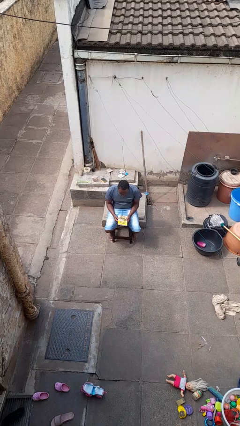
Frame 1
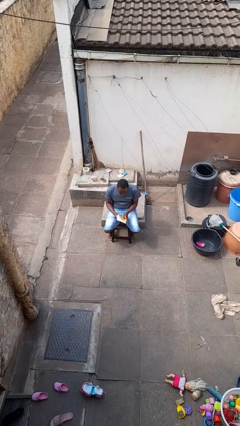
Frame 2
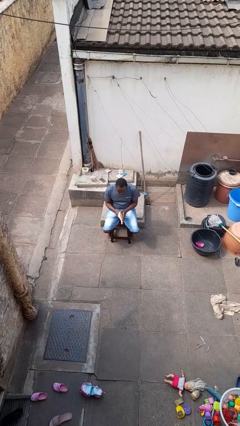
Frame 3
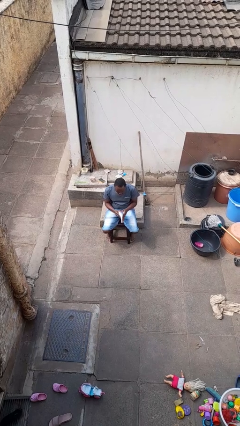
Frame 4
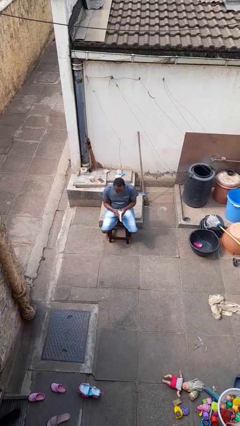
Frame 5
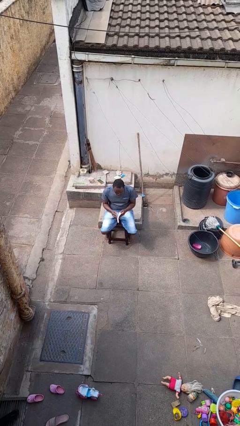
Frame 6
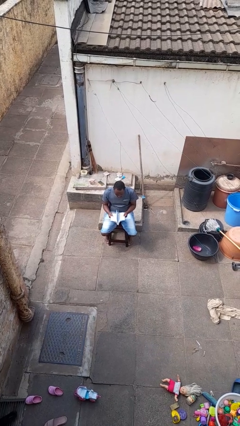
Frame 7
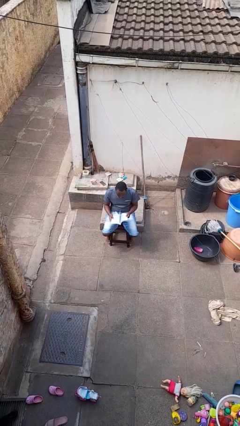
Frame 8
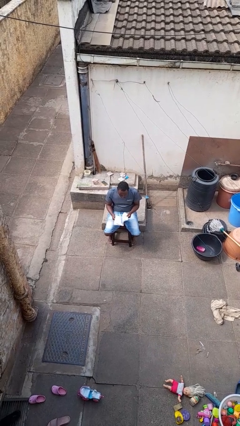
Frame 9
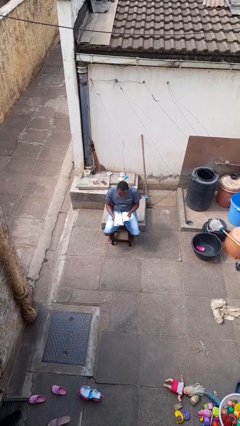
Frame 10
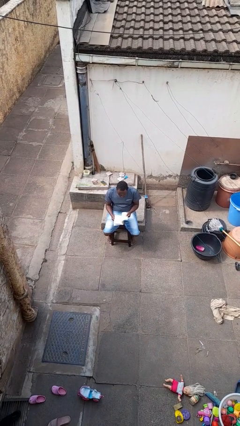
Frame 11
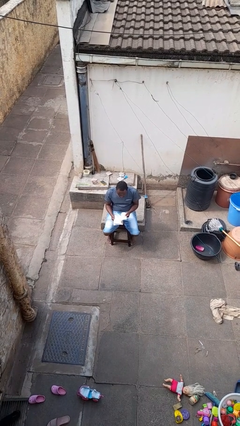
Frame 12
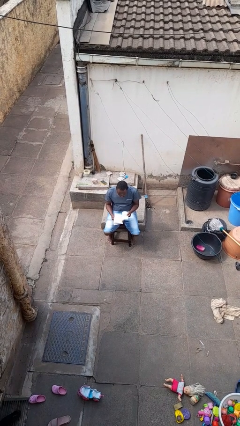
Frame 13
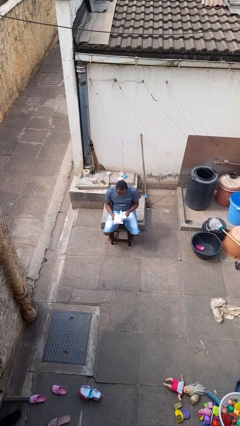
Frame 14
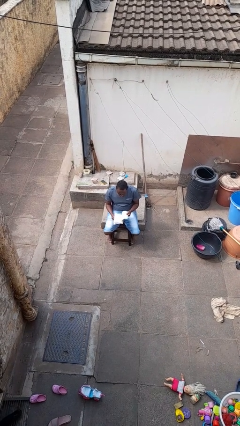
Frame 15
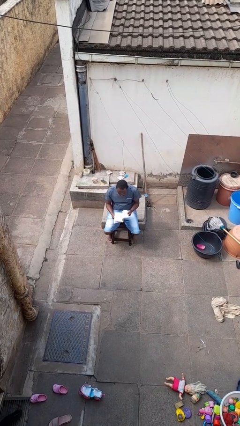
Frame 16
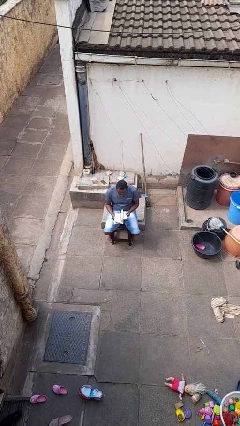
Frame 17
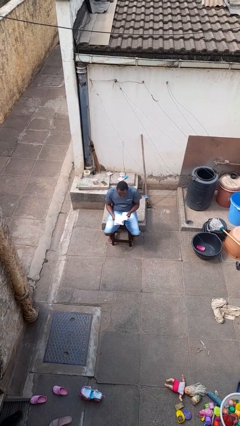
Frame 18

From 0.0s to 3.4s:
person reads book

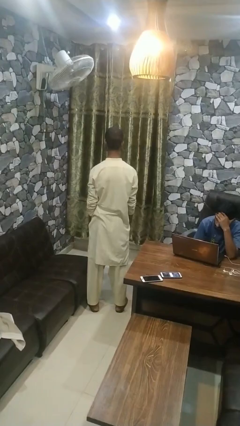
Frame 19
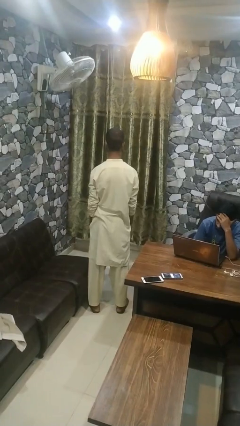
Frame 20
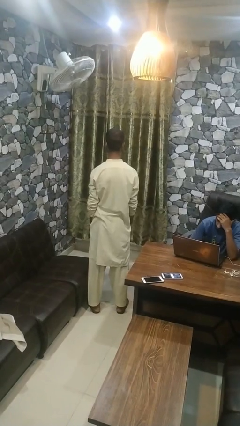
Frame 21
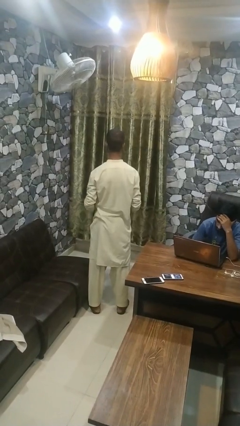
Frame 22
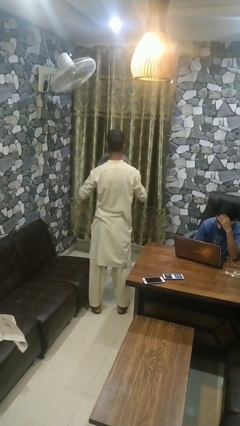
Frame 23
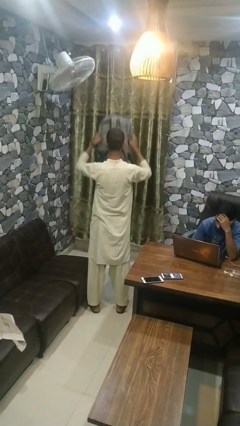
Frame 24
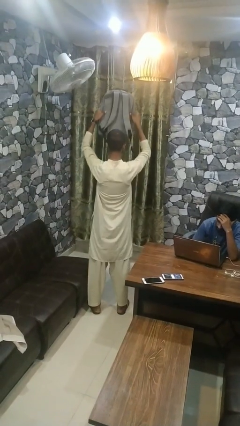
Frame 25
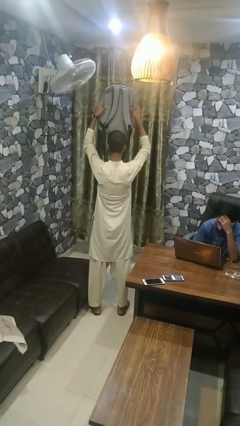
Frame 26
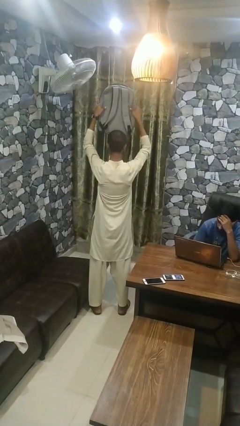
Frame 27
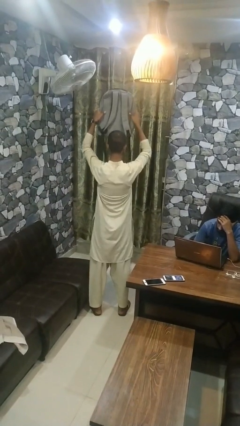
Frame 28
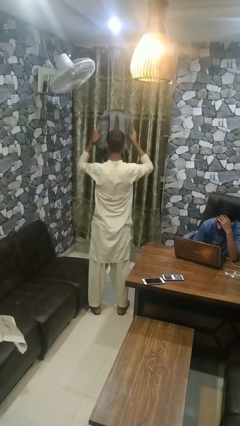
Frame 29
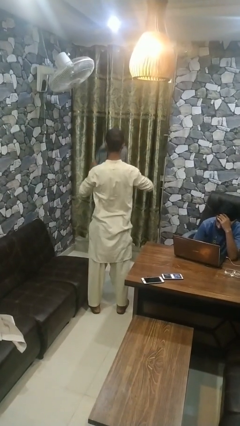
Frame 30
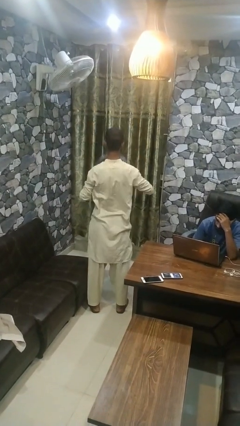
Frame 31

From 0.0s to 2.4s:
person holds object above head

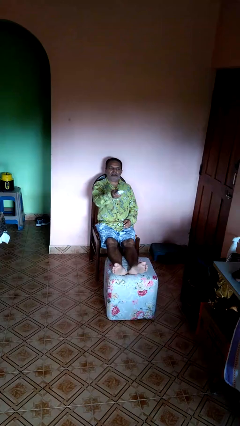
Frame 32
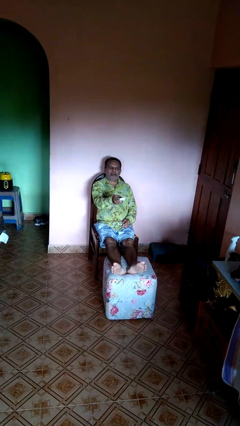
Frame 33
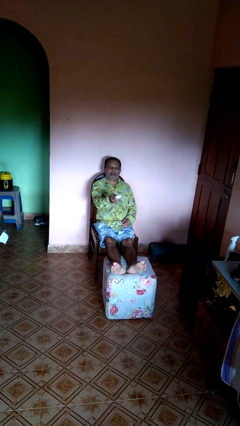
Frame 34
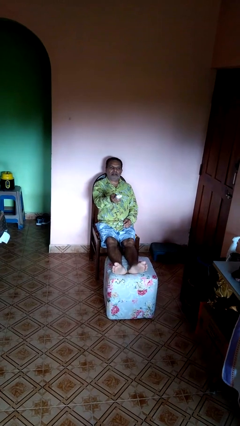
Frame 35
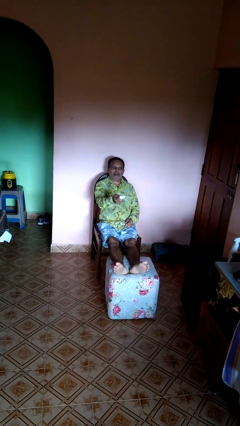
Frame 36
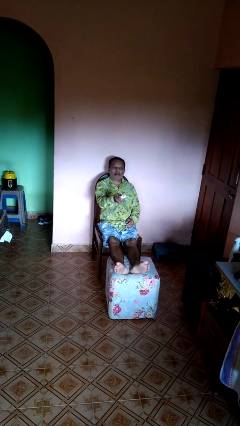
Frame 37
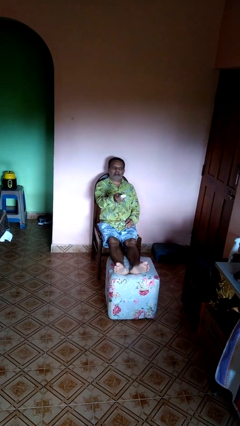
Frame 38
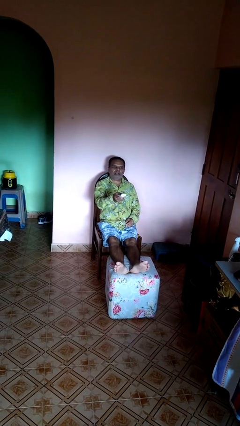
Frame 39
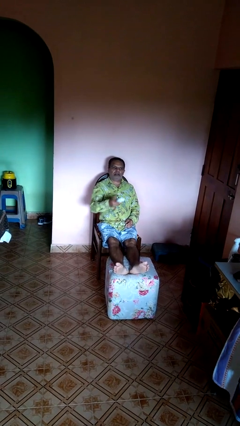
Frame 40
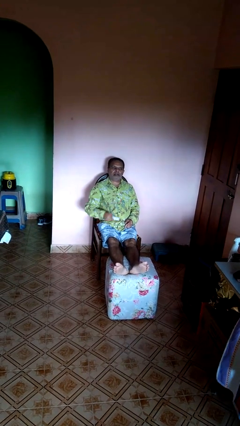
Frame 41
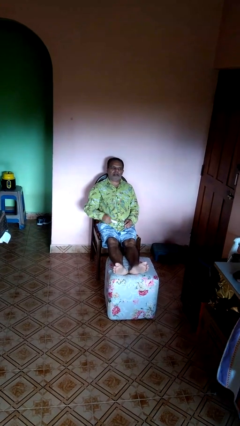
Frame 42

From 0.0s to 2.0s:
person uses television remote

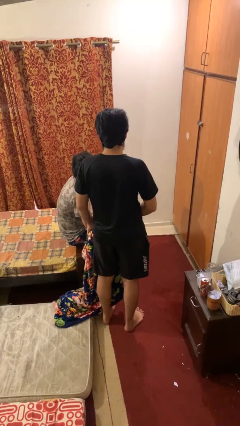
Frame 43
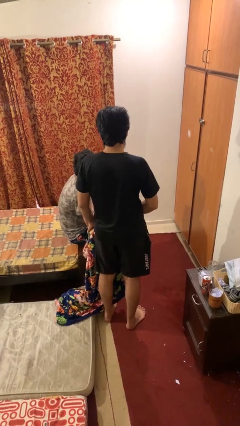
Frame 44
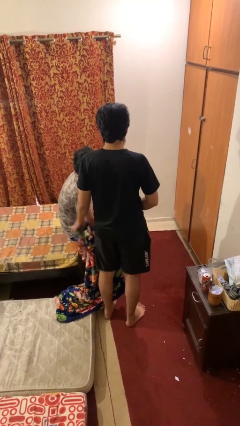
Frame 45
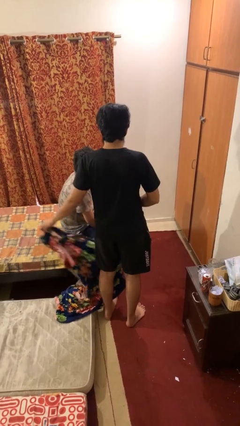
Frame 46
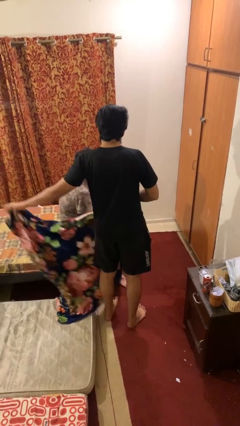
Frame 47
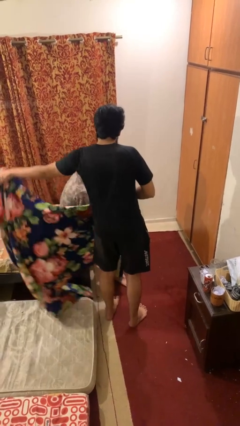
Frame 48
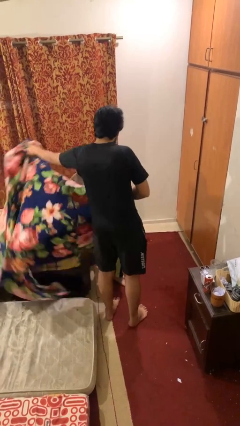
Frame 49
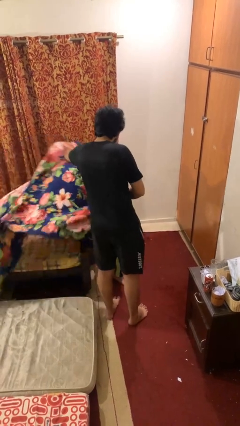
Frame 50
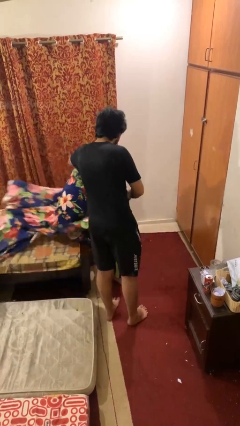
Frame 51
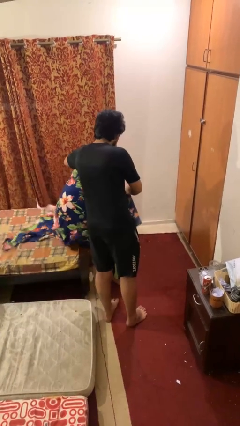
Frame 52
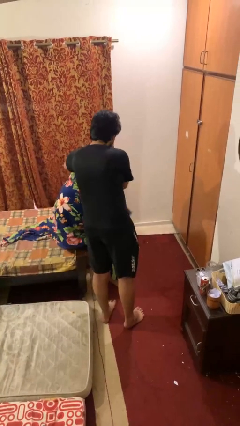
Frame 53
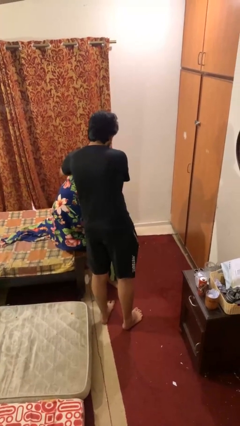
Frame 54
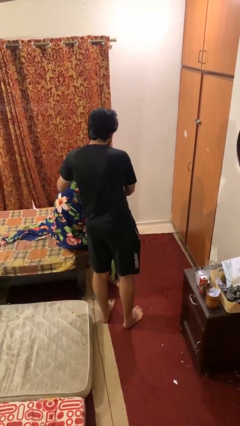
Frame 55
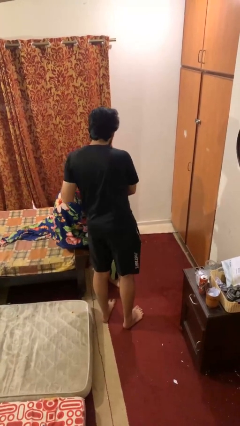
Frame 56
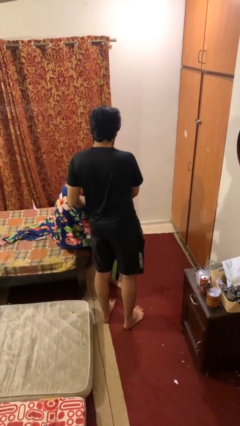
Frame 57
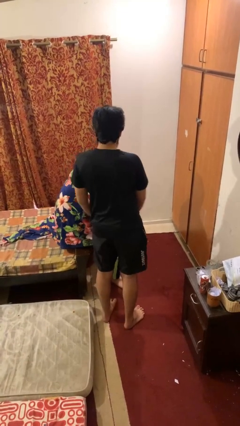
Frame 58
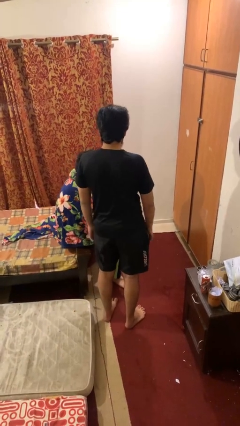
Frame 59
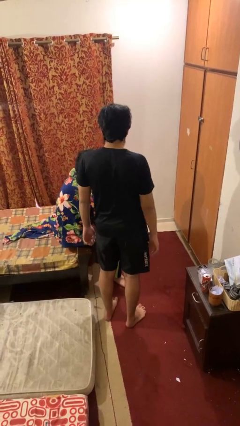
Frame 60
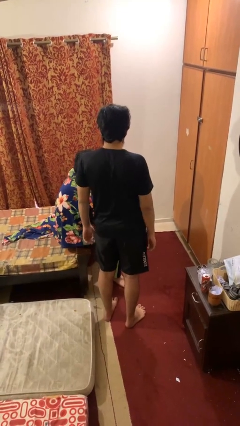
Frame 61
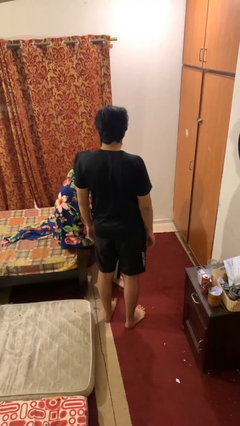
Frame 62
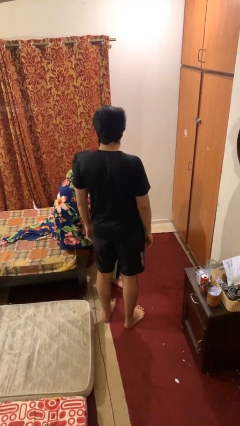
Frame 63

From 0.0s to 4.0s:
person covers friend with blanket

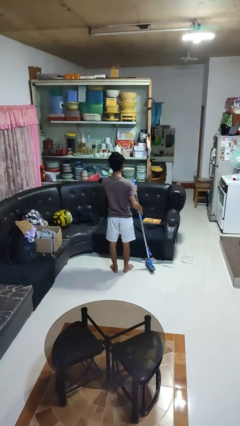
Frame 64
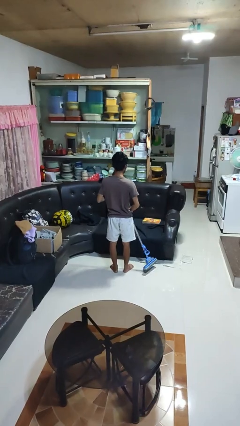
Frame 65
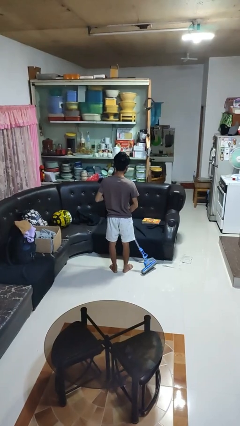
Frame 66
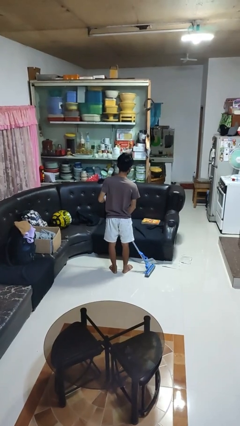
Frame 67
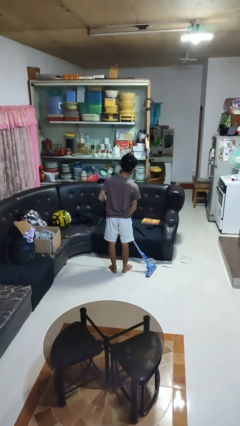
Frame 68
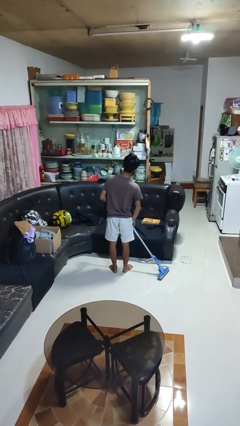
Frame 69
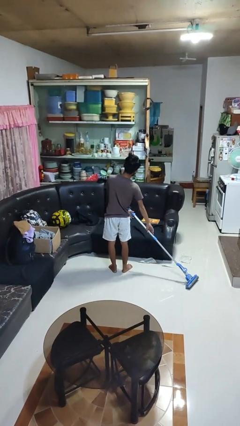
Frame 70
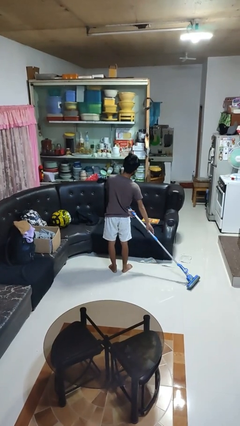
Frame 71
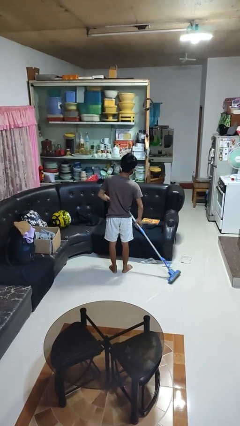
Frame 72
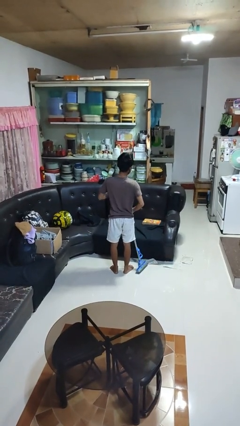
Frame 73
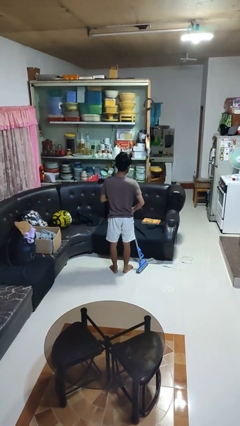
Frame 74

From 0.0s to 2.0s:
person mops

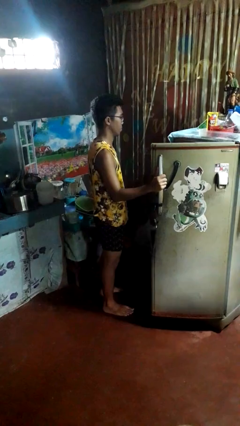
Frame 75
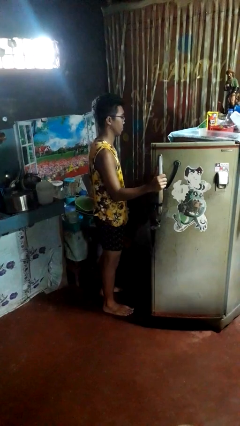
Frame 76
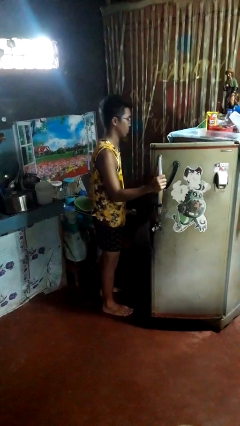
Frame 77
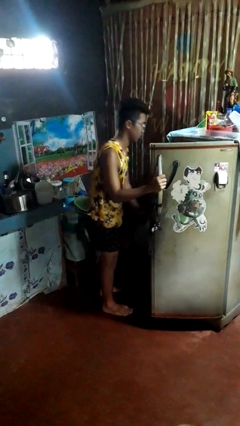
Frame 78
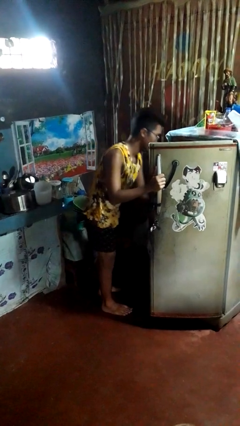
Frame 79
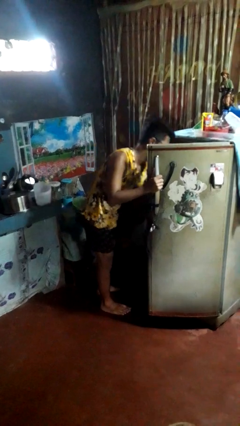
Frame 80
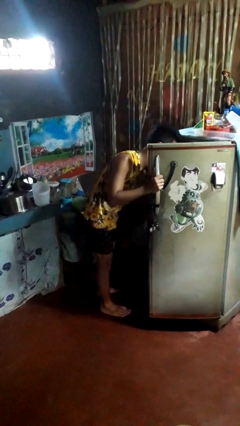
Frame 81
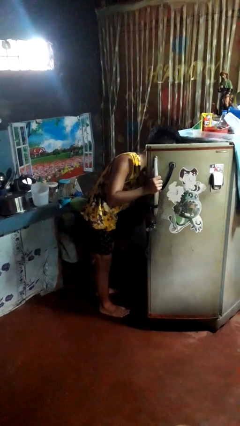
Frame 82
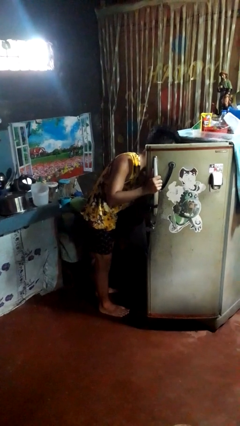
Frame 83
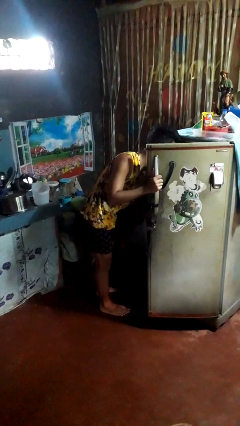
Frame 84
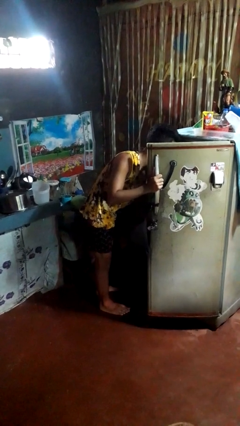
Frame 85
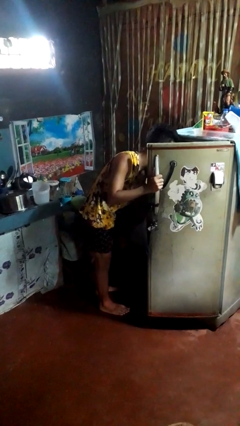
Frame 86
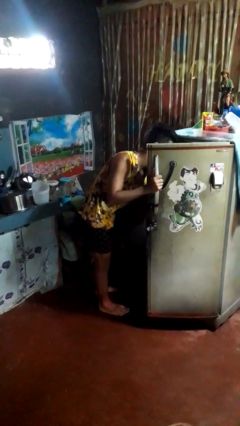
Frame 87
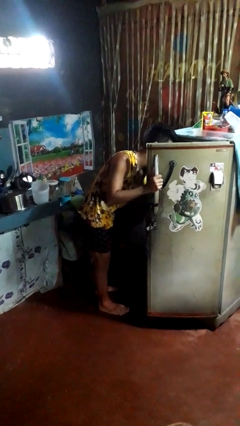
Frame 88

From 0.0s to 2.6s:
person puts object into refrigerator

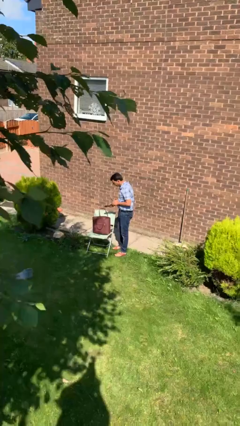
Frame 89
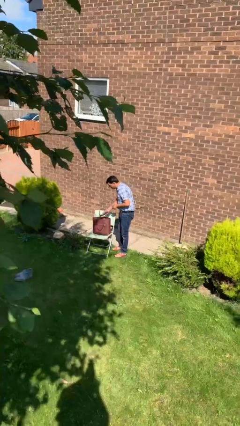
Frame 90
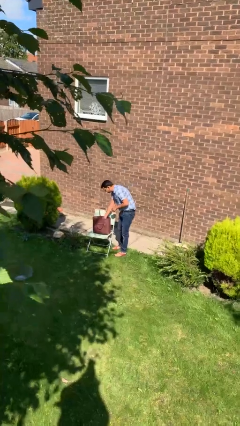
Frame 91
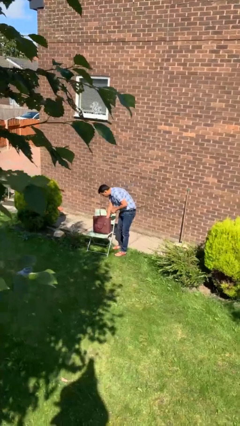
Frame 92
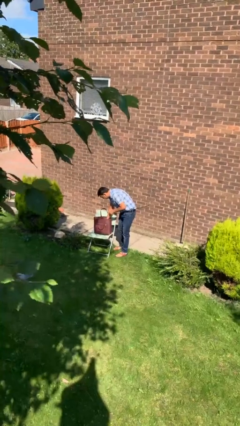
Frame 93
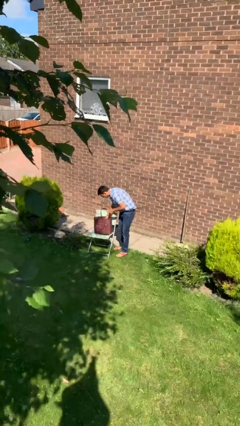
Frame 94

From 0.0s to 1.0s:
person puts object into purse
